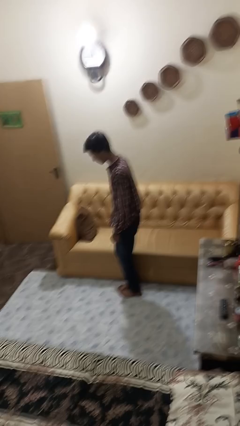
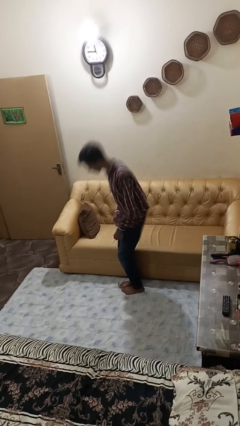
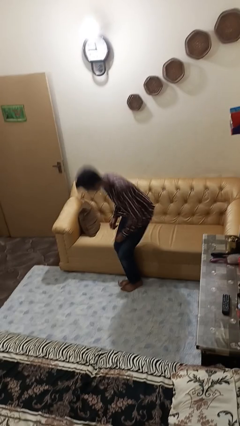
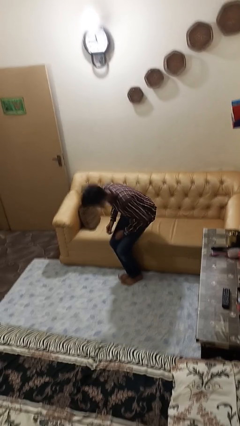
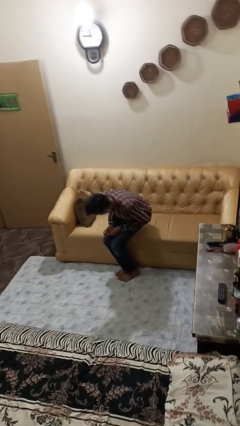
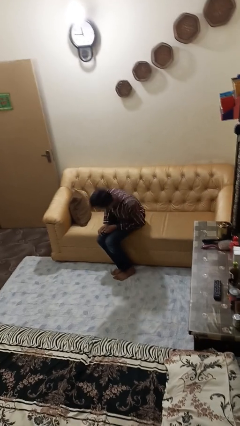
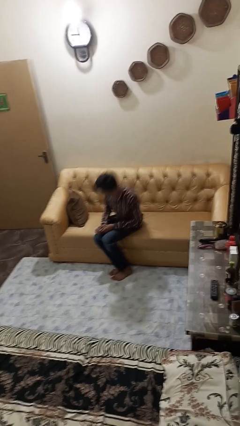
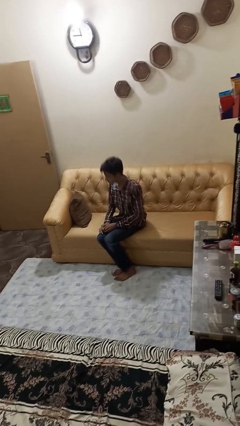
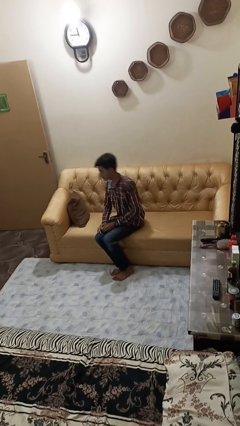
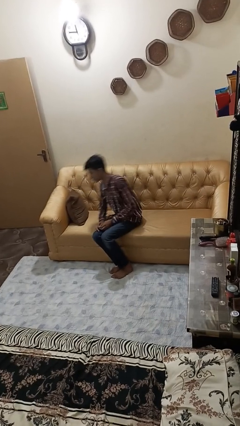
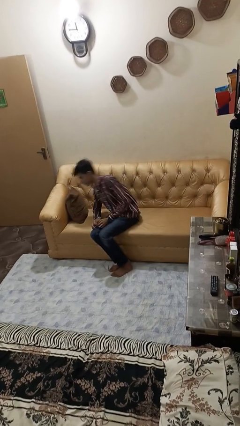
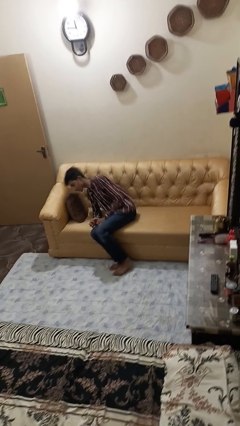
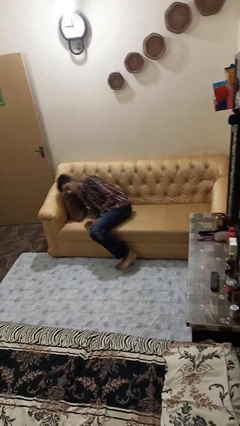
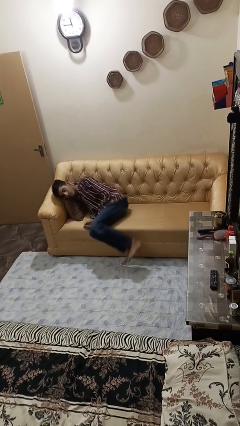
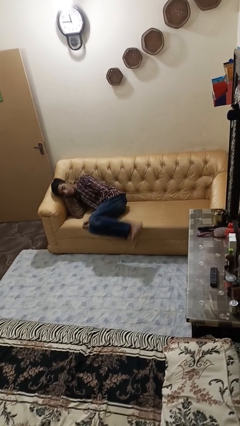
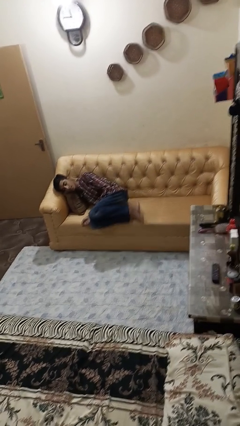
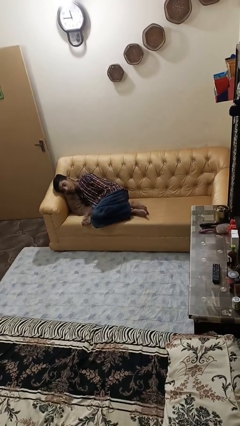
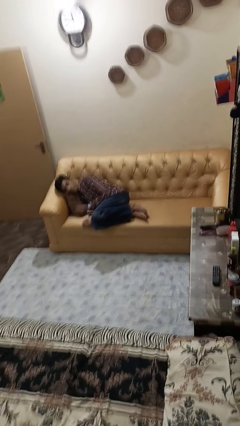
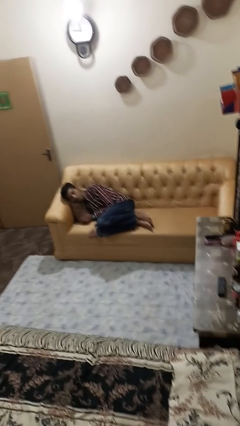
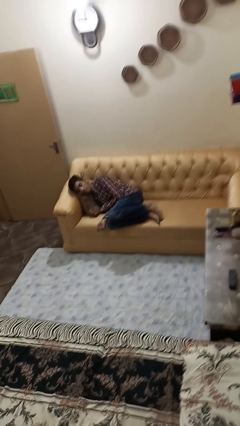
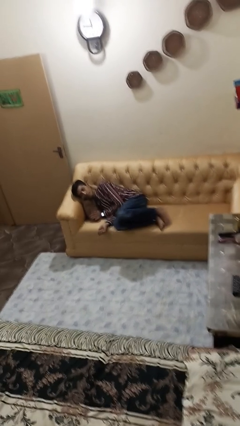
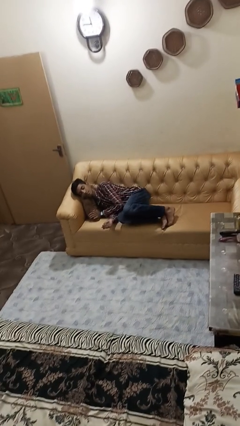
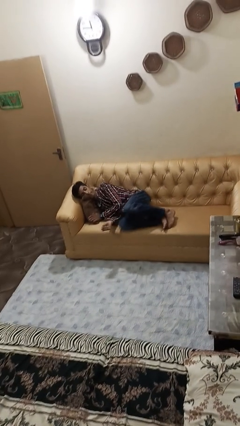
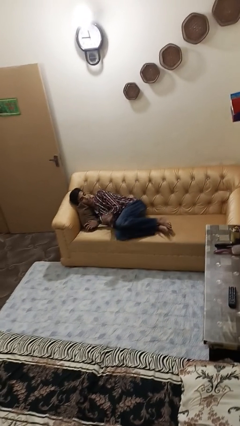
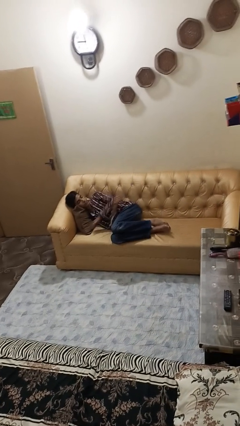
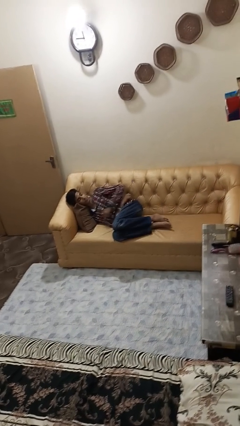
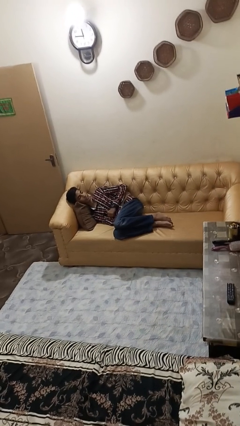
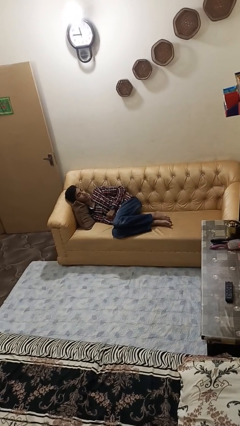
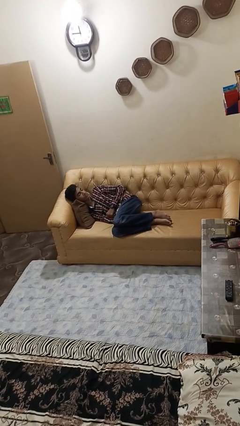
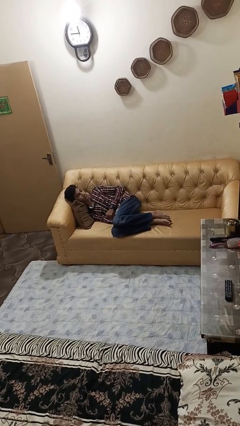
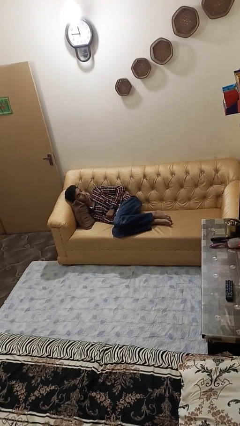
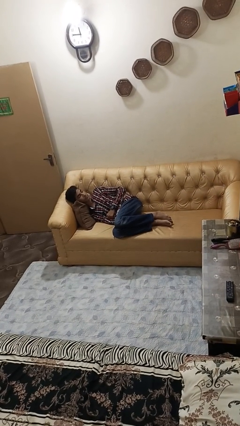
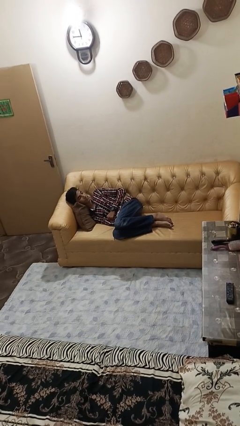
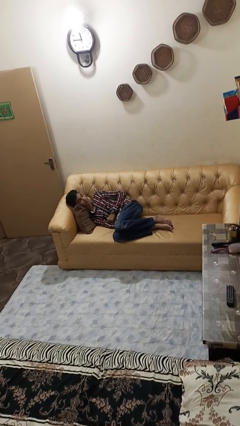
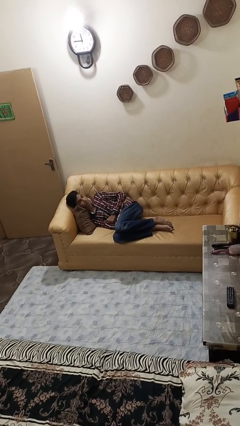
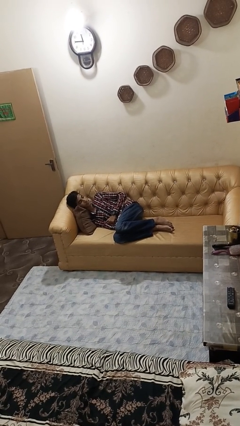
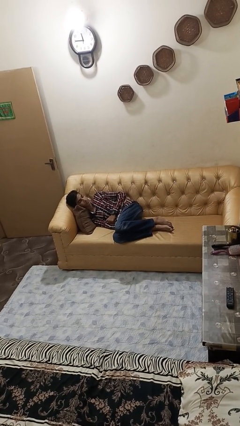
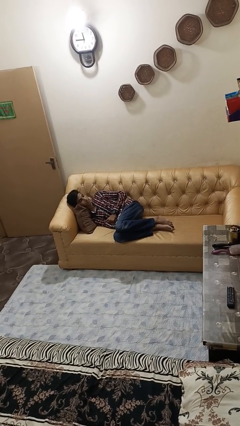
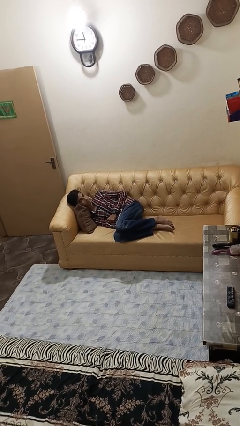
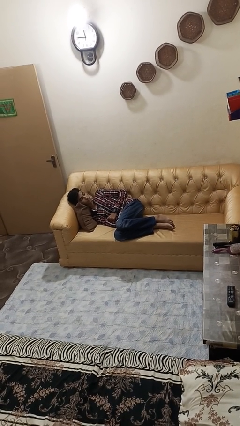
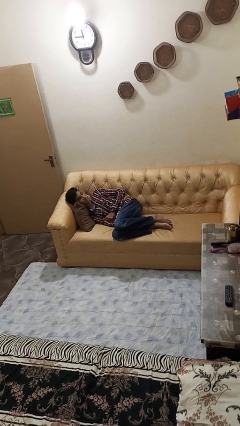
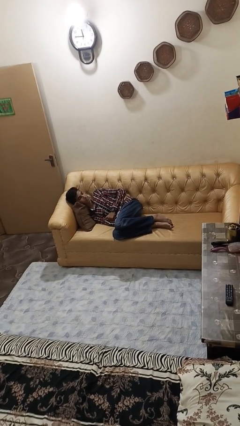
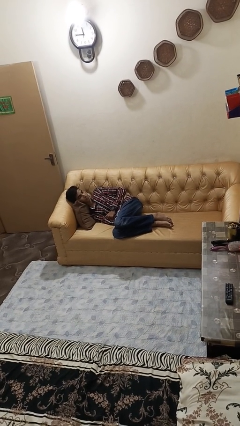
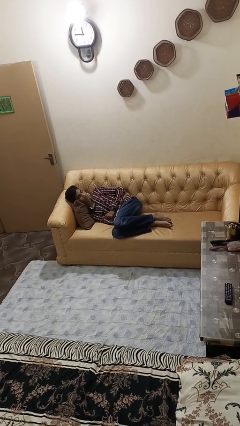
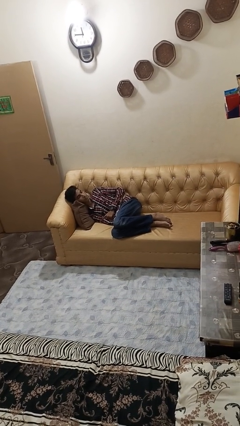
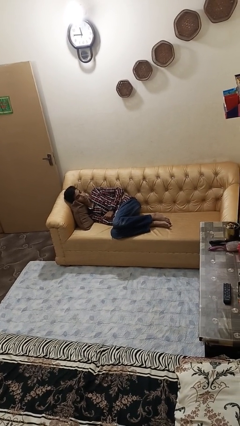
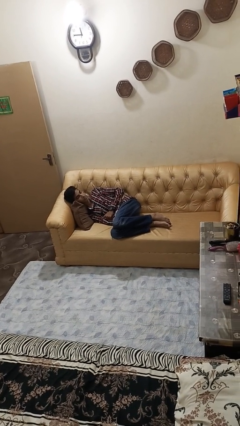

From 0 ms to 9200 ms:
person lies down on couch

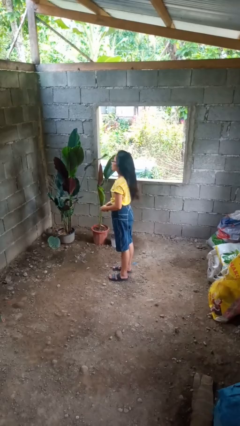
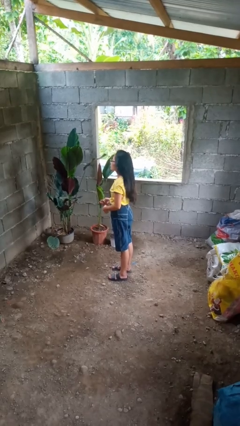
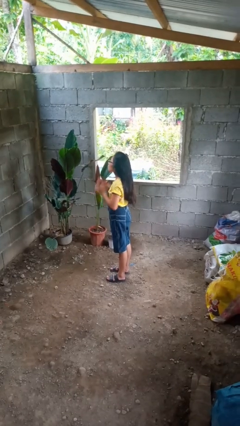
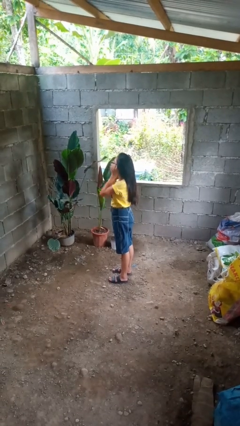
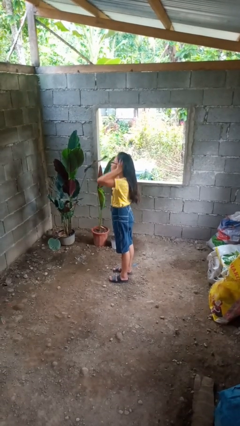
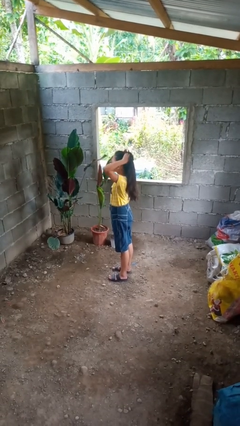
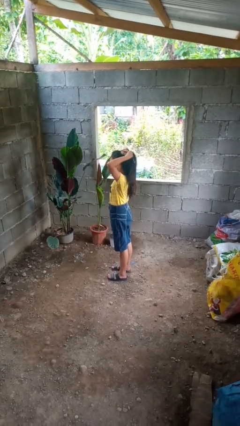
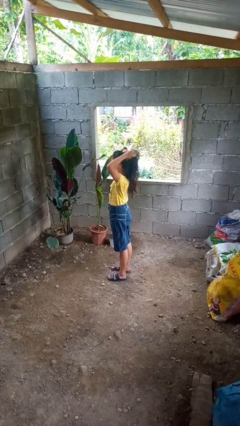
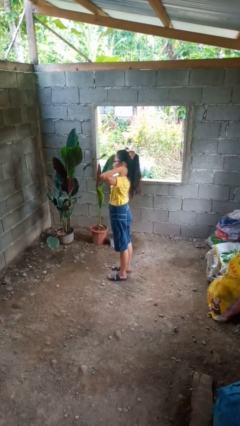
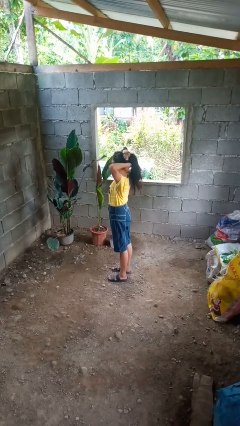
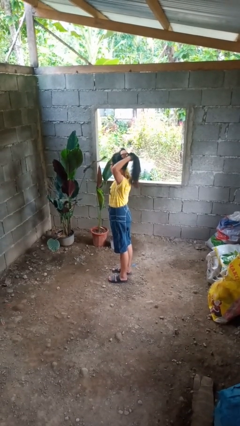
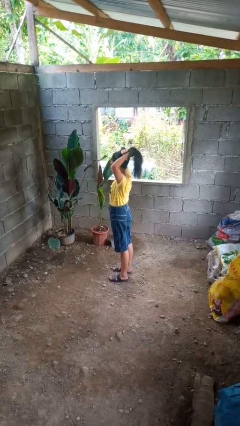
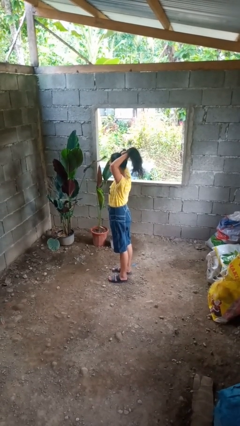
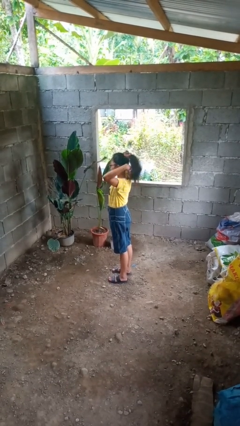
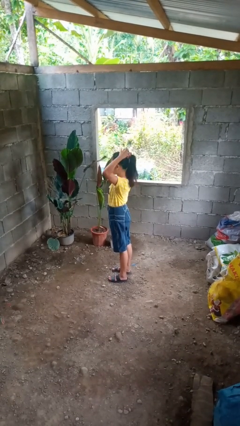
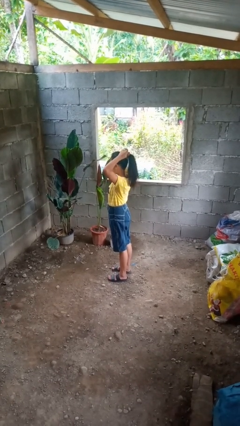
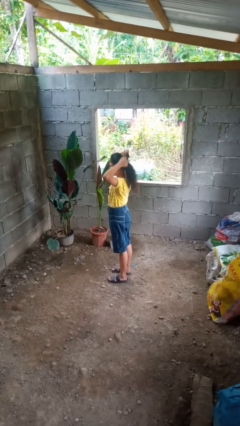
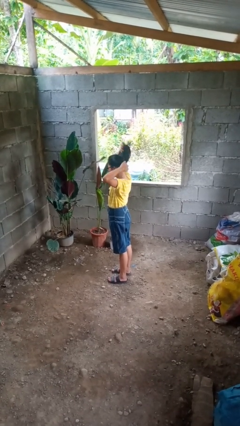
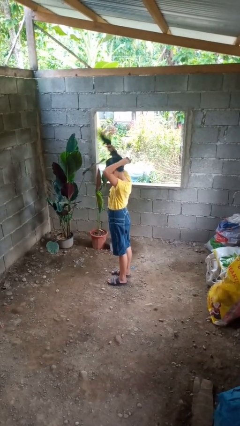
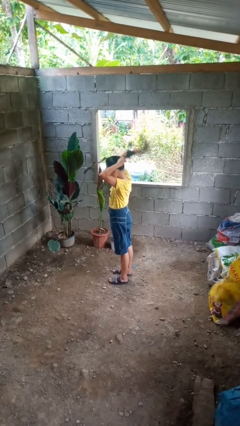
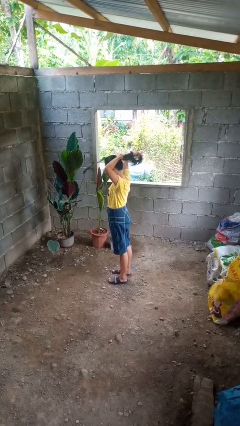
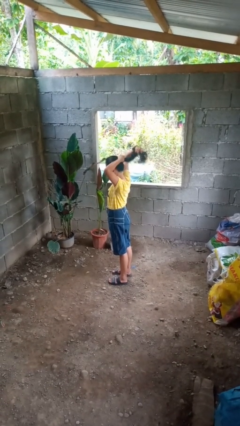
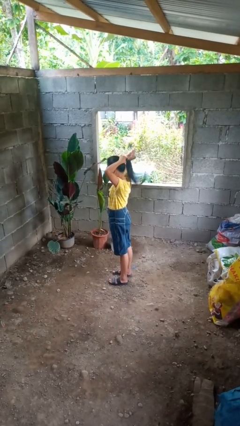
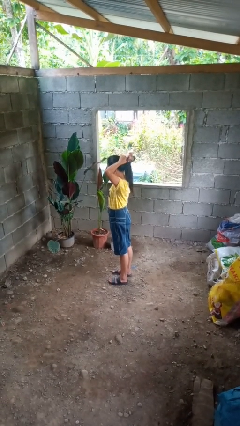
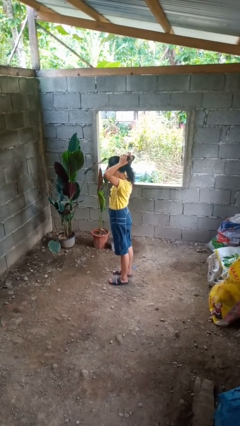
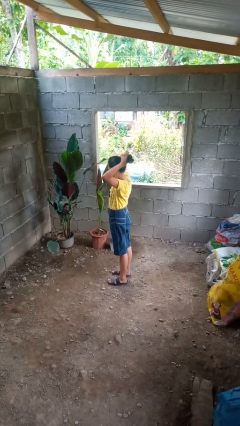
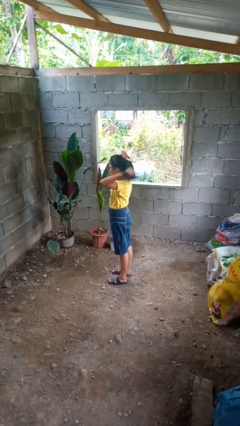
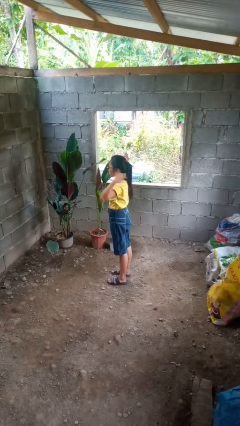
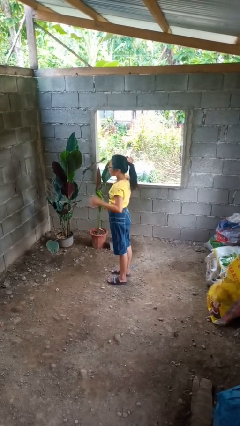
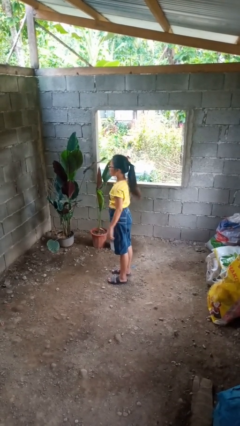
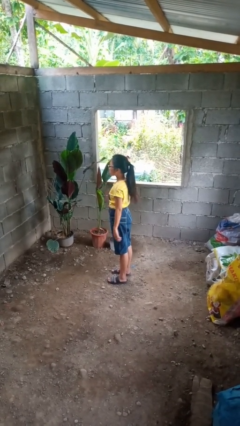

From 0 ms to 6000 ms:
person puts hair in ponytail

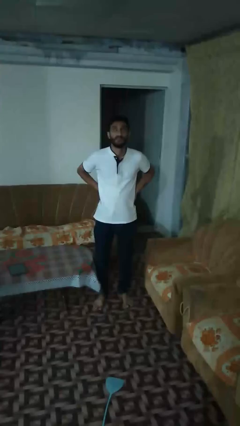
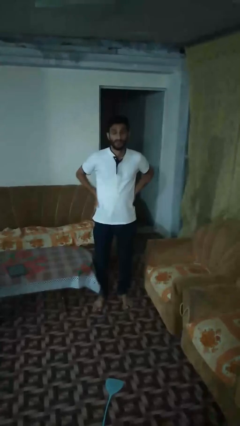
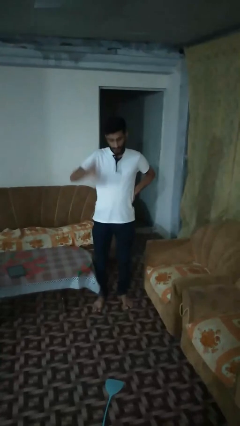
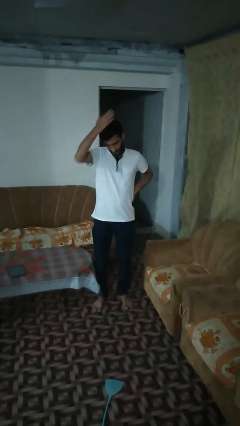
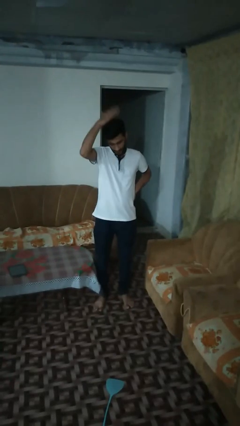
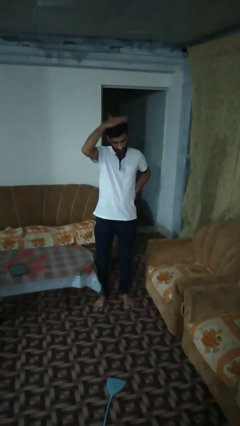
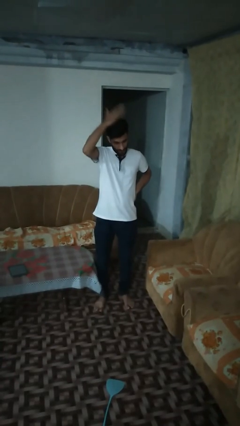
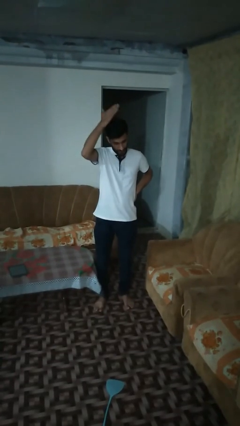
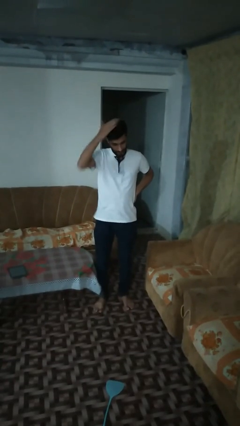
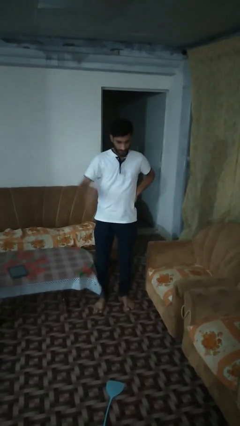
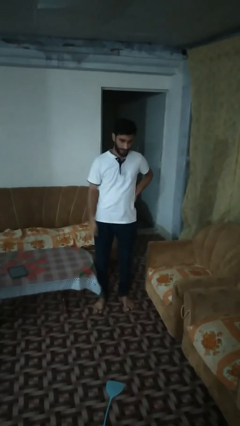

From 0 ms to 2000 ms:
person pats head

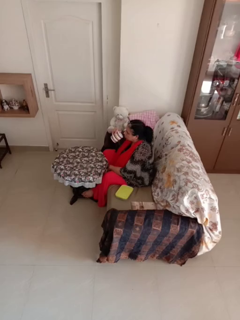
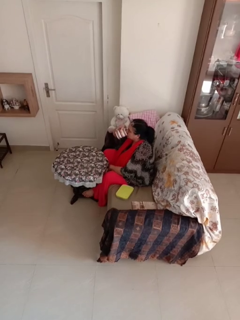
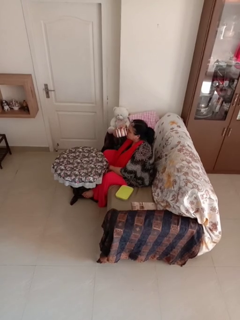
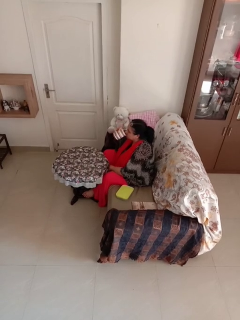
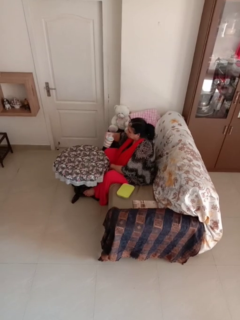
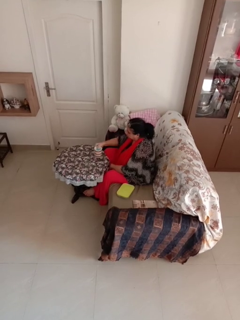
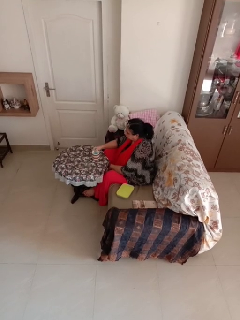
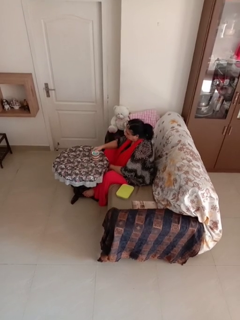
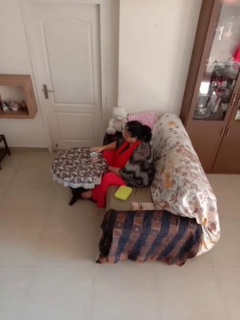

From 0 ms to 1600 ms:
person drinks from mug
